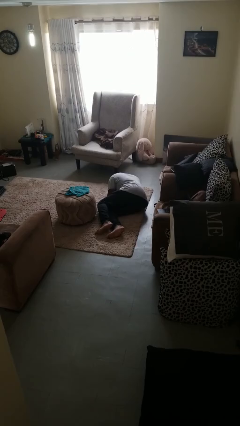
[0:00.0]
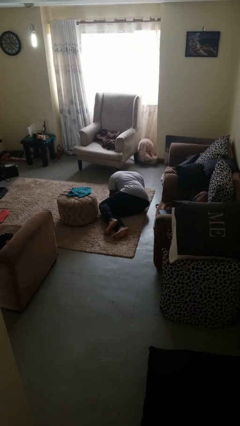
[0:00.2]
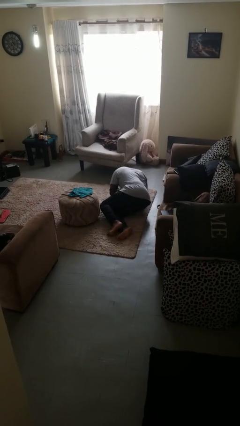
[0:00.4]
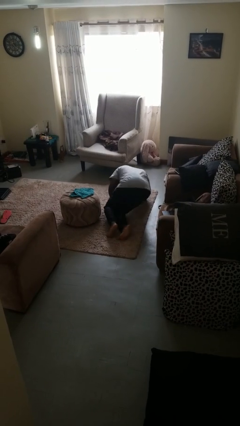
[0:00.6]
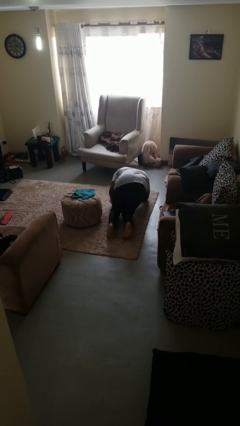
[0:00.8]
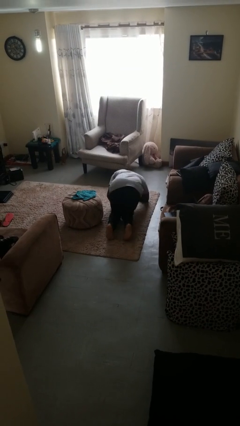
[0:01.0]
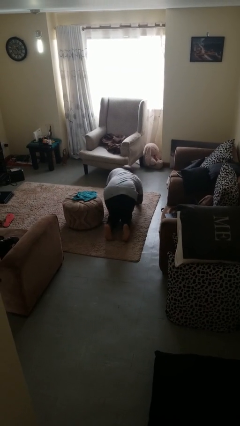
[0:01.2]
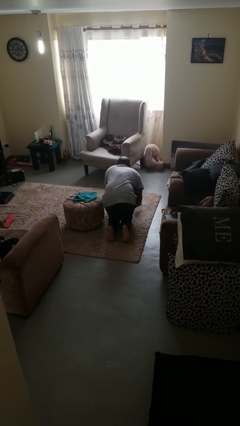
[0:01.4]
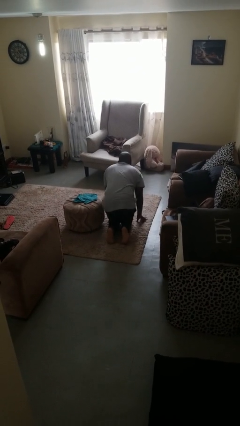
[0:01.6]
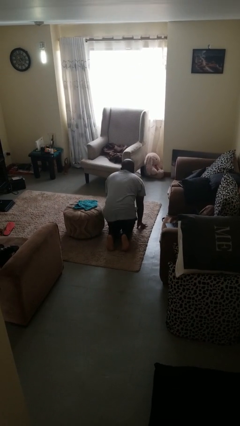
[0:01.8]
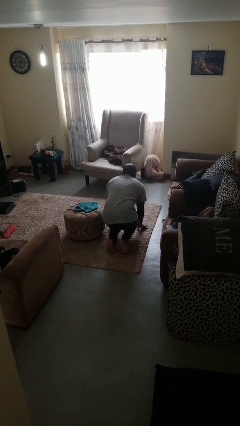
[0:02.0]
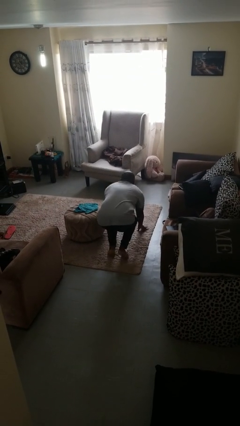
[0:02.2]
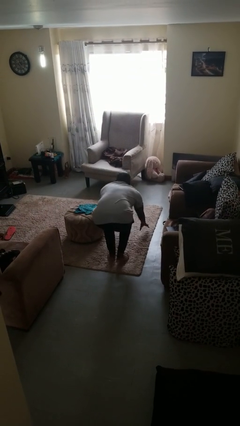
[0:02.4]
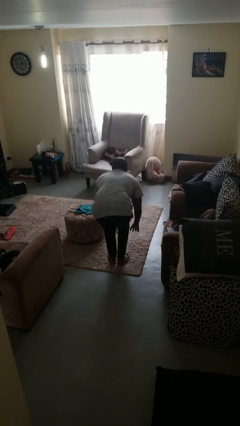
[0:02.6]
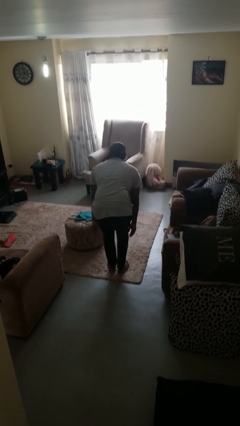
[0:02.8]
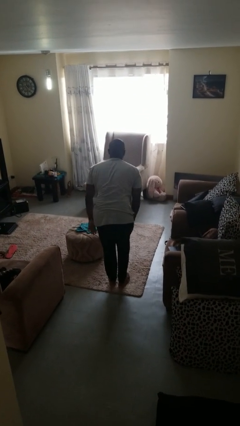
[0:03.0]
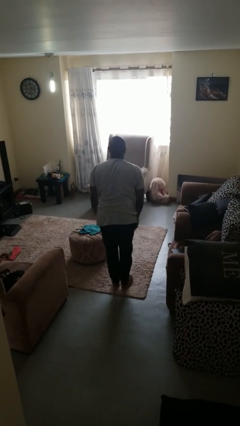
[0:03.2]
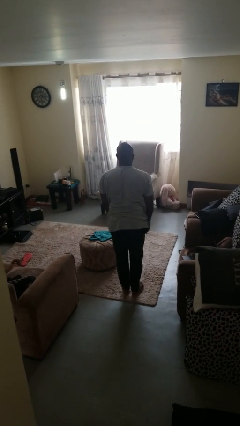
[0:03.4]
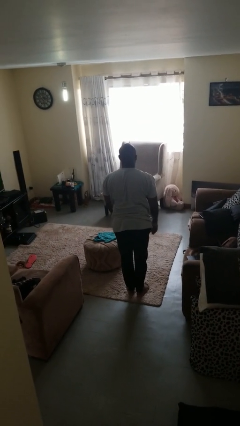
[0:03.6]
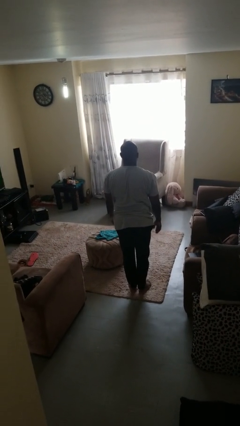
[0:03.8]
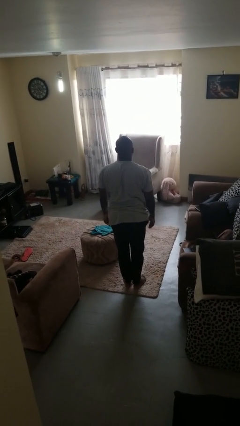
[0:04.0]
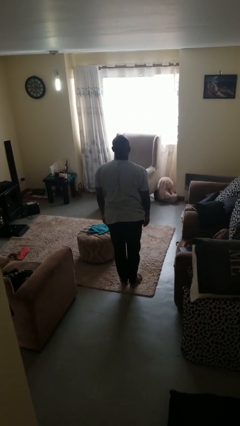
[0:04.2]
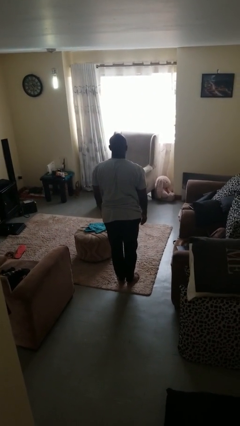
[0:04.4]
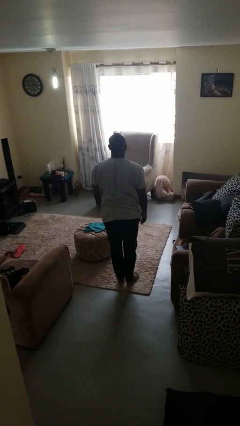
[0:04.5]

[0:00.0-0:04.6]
person stands up from floor

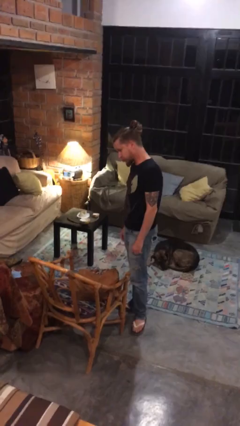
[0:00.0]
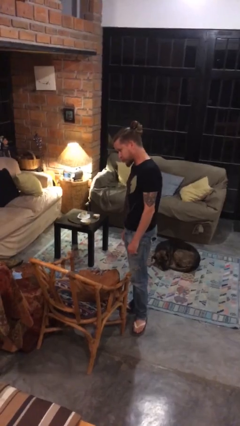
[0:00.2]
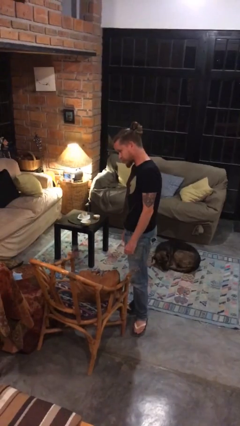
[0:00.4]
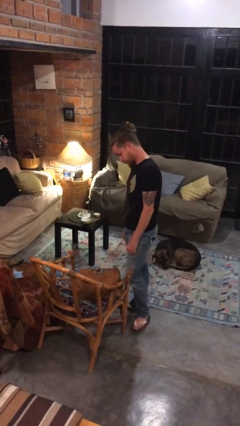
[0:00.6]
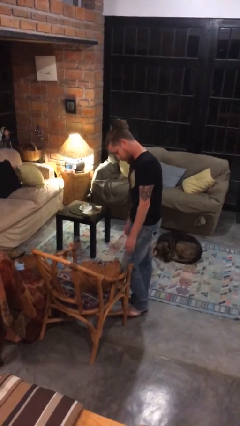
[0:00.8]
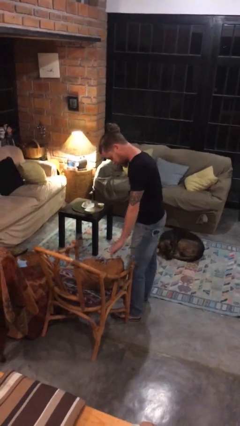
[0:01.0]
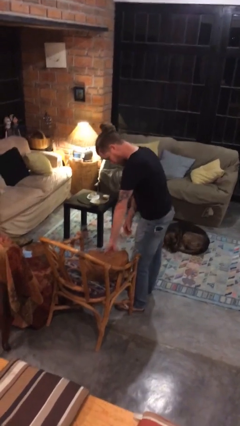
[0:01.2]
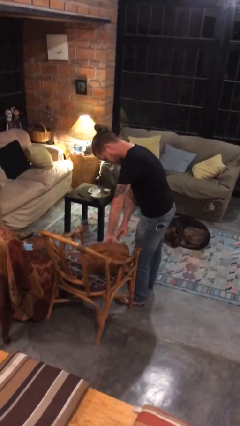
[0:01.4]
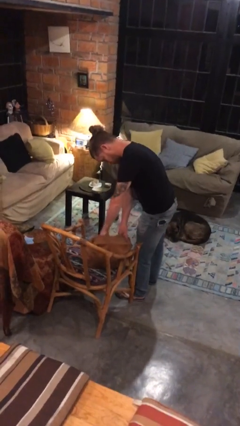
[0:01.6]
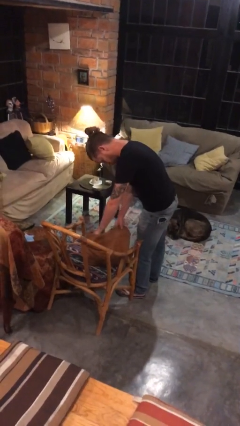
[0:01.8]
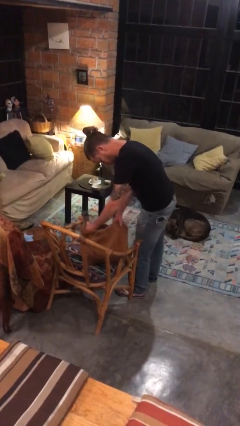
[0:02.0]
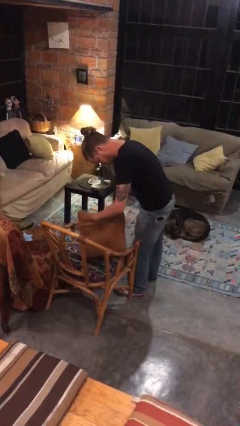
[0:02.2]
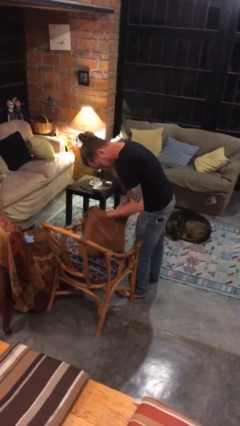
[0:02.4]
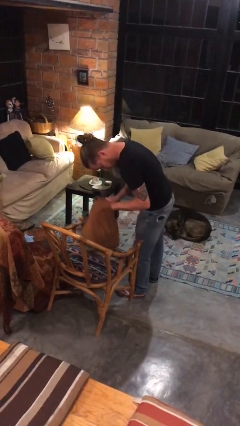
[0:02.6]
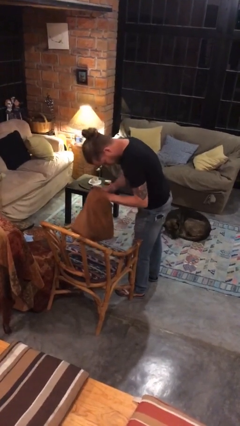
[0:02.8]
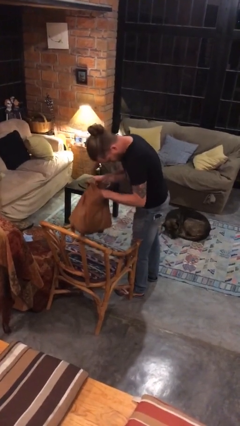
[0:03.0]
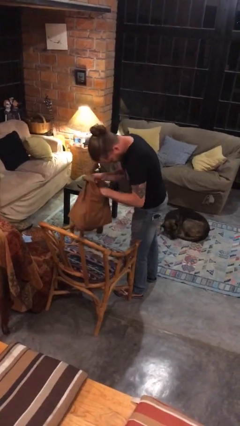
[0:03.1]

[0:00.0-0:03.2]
person searches in purse

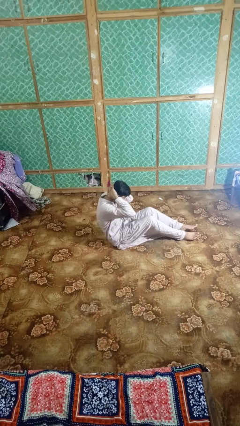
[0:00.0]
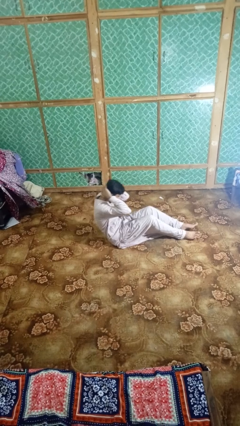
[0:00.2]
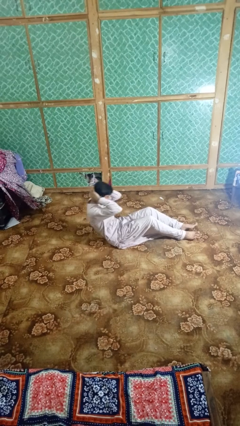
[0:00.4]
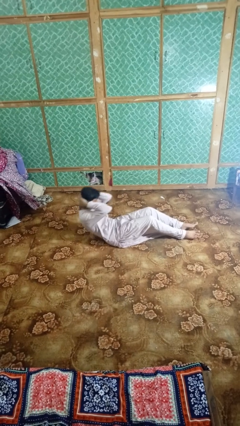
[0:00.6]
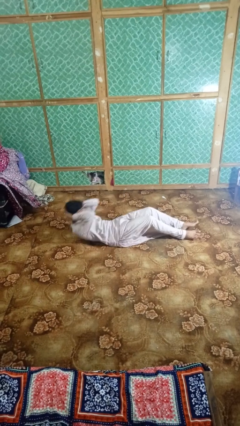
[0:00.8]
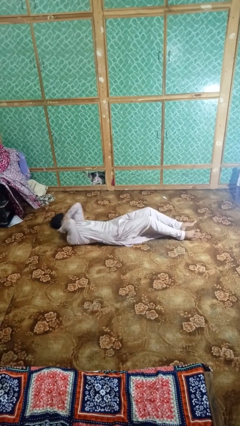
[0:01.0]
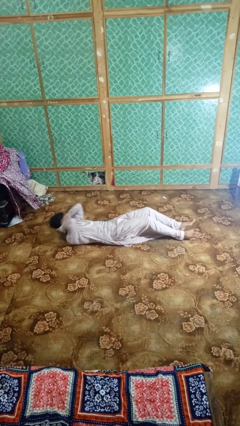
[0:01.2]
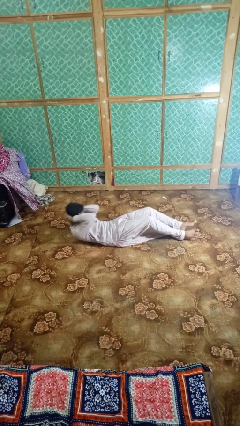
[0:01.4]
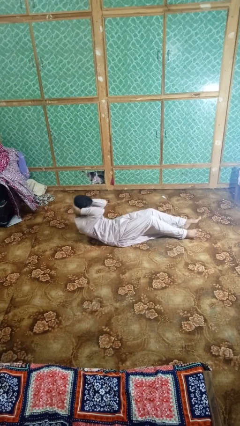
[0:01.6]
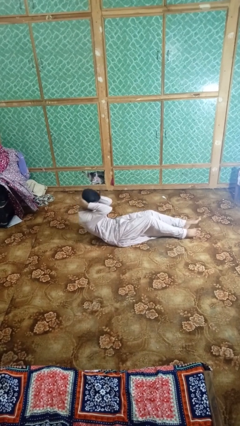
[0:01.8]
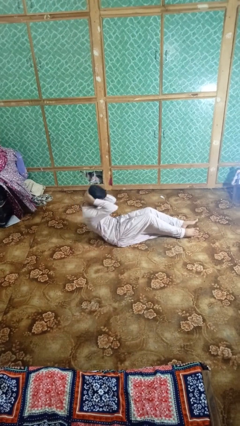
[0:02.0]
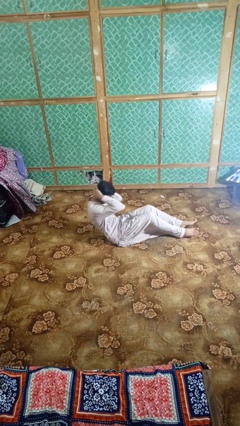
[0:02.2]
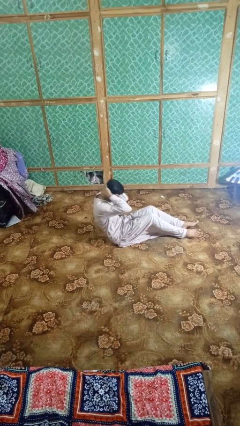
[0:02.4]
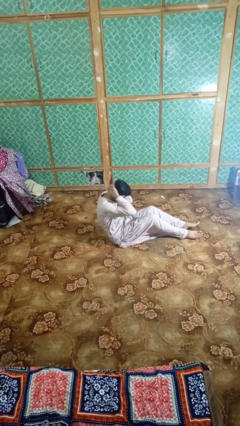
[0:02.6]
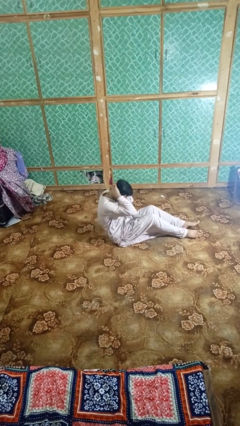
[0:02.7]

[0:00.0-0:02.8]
person exercises with situp

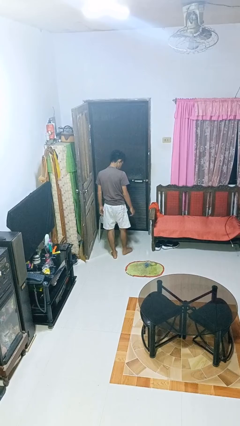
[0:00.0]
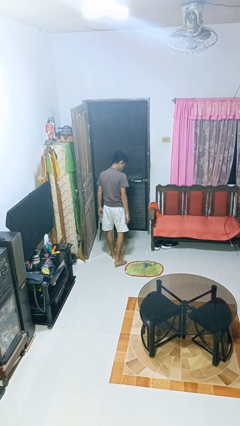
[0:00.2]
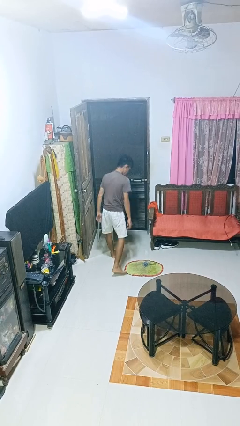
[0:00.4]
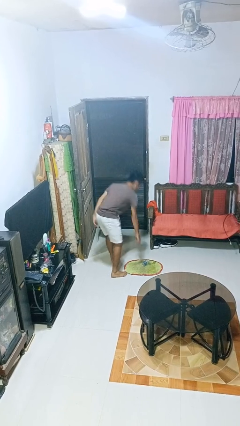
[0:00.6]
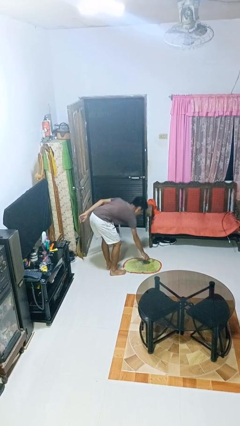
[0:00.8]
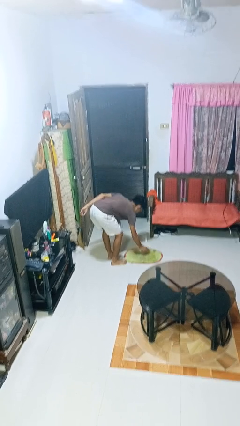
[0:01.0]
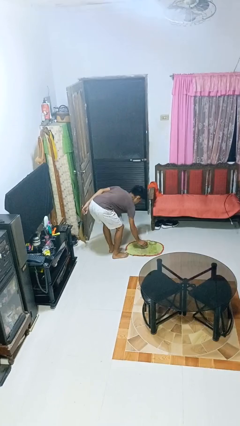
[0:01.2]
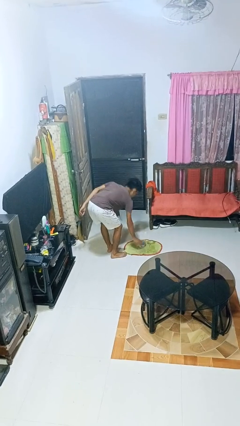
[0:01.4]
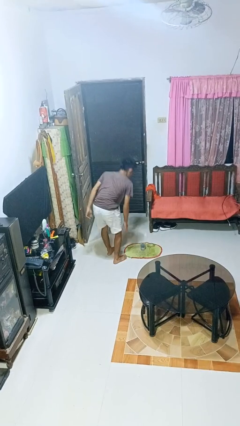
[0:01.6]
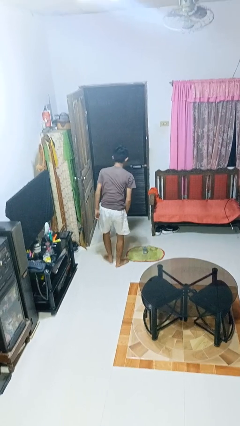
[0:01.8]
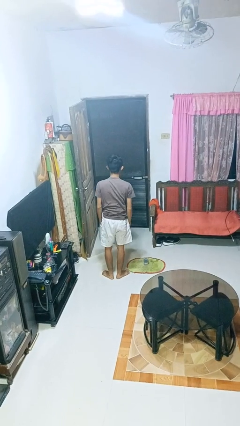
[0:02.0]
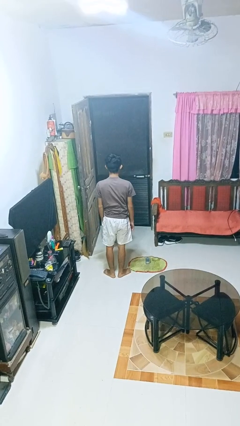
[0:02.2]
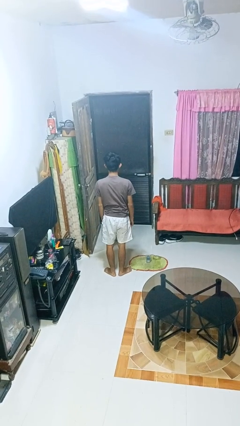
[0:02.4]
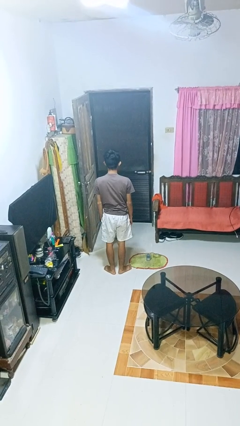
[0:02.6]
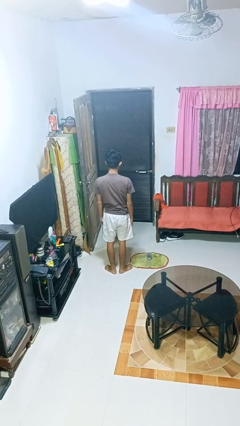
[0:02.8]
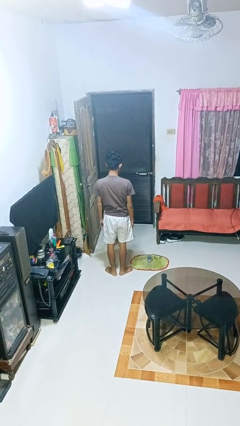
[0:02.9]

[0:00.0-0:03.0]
person sets upright glass

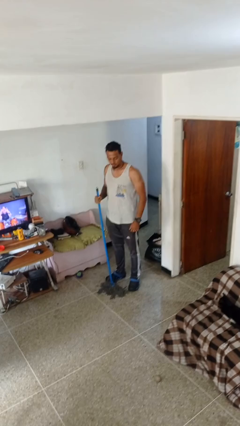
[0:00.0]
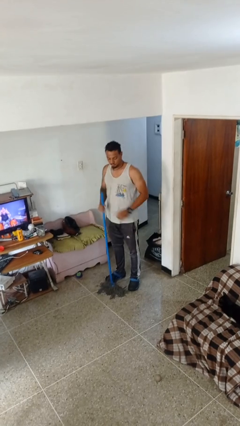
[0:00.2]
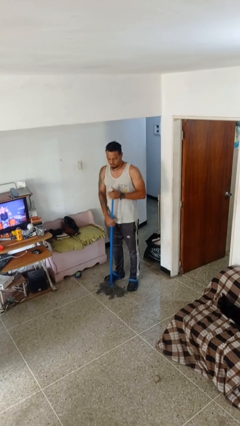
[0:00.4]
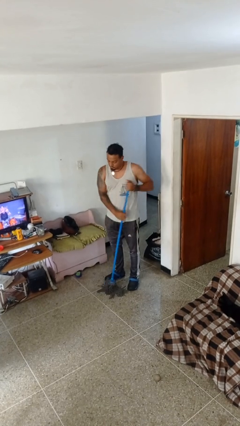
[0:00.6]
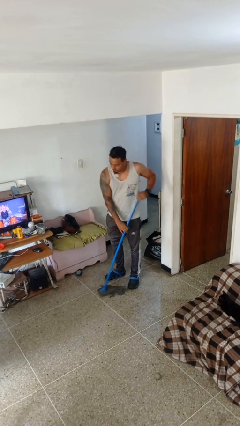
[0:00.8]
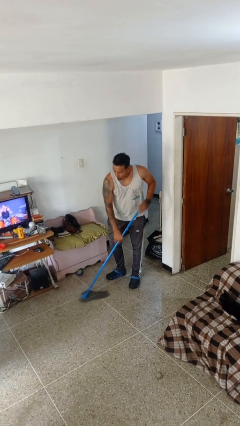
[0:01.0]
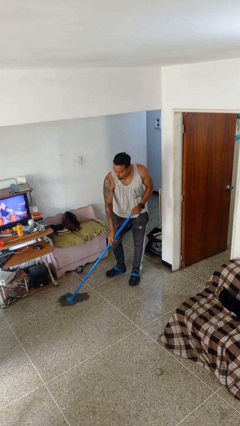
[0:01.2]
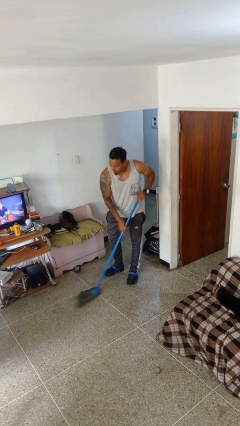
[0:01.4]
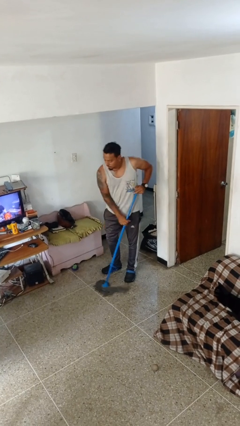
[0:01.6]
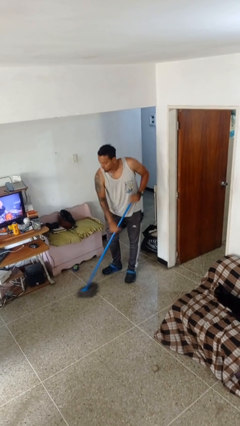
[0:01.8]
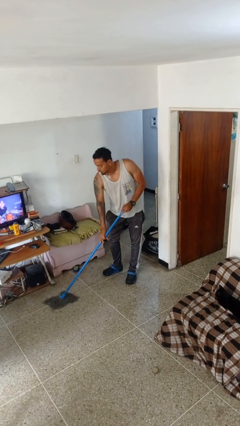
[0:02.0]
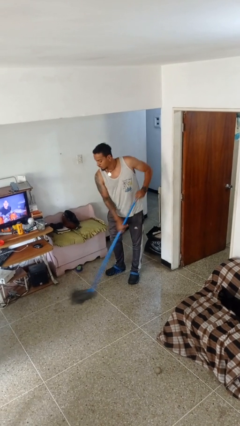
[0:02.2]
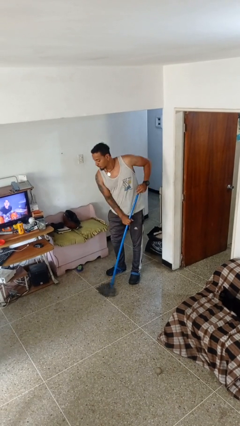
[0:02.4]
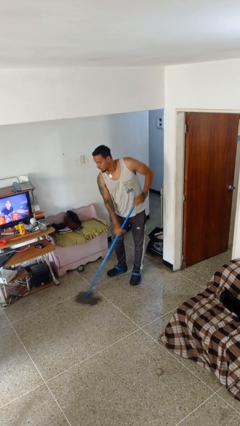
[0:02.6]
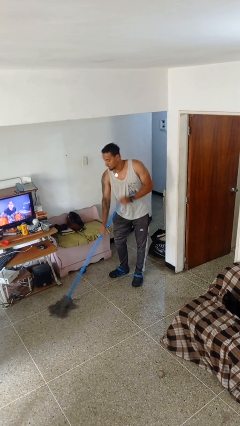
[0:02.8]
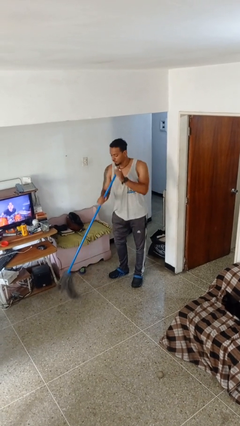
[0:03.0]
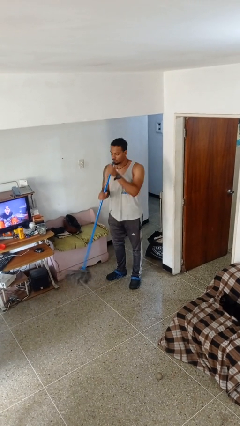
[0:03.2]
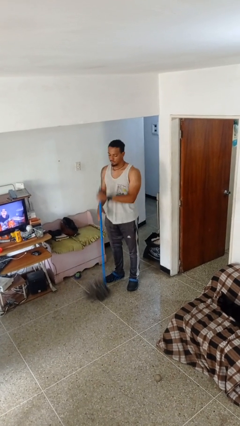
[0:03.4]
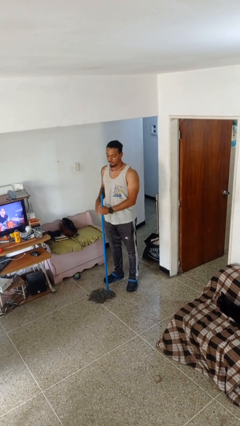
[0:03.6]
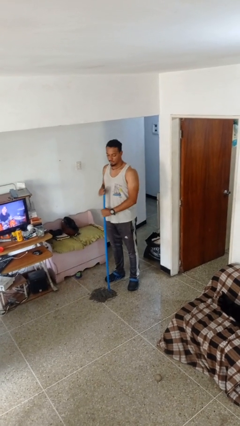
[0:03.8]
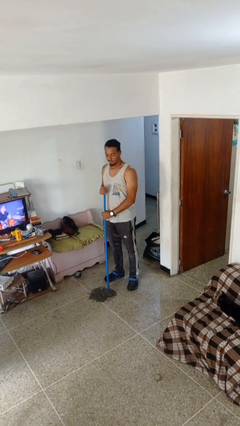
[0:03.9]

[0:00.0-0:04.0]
person mops
